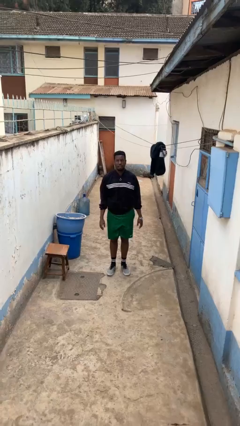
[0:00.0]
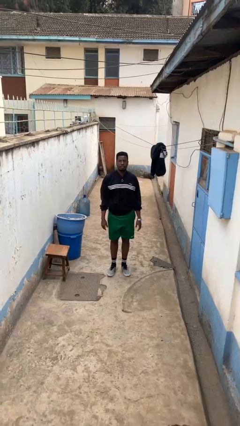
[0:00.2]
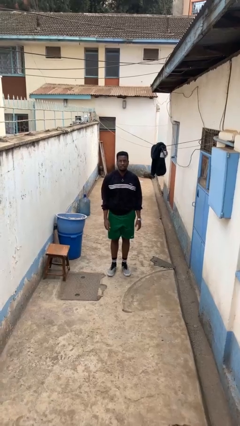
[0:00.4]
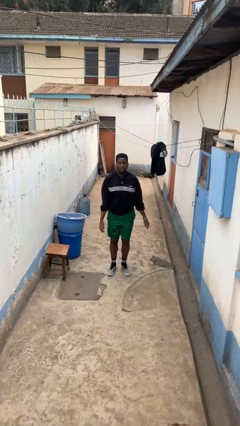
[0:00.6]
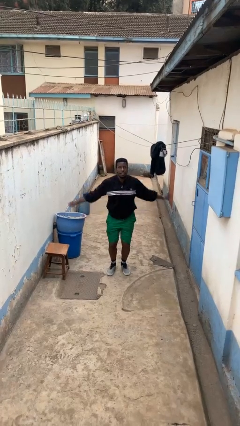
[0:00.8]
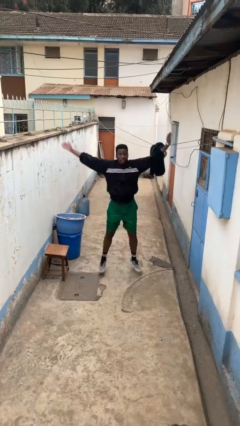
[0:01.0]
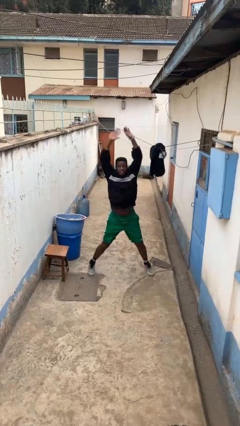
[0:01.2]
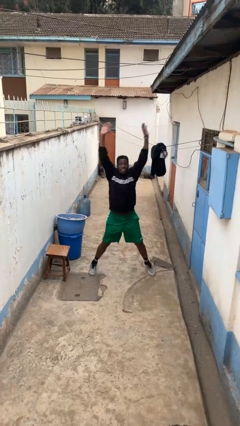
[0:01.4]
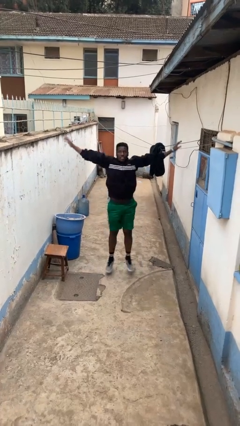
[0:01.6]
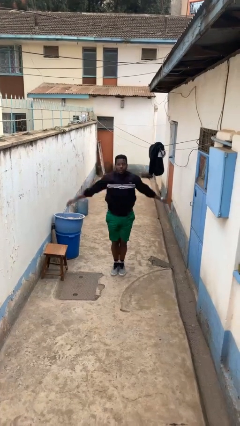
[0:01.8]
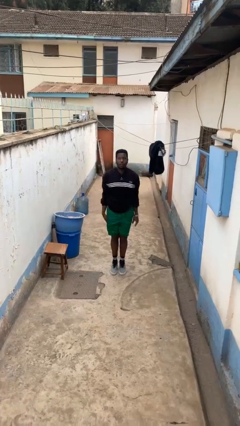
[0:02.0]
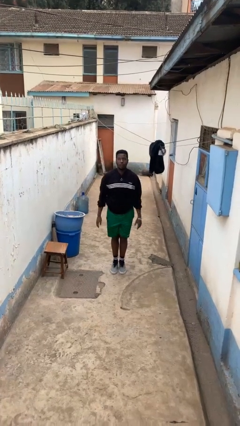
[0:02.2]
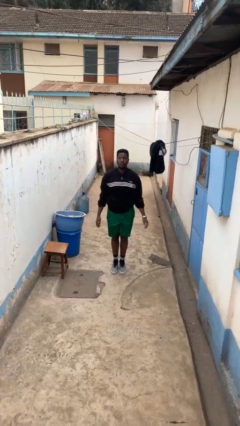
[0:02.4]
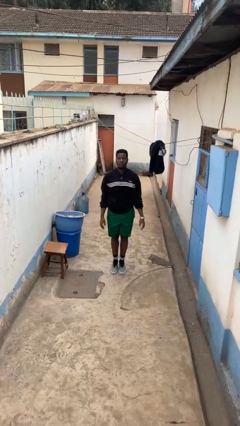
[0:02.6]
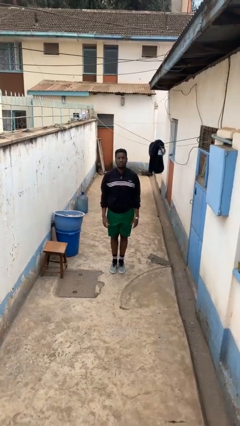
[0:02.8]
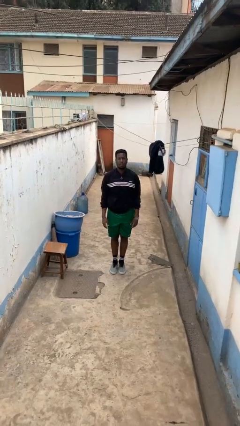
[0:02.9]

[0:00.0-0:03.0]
person exercises with jumping jacks

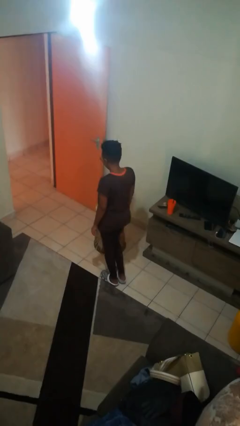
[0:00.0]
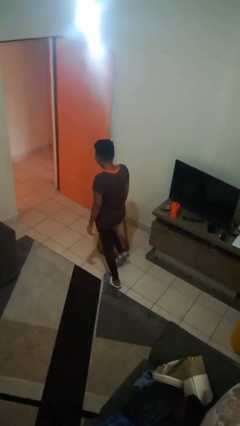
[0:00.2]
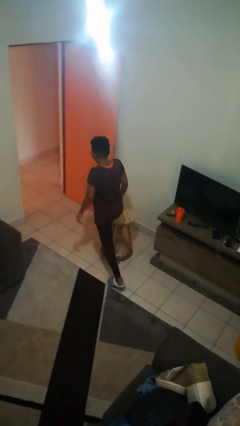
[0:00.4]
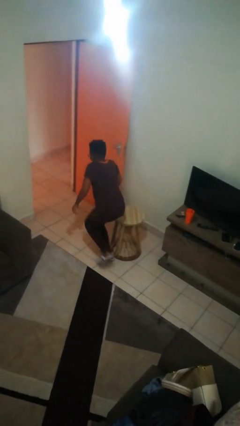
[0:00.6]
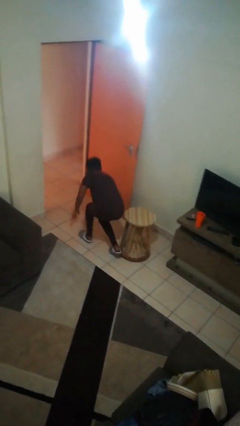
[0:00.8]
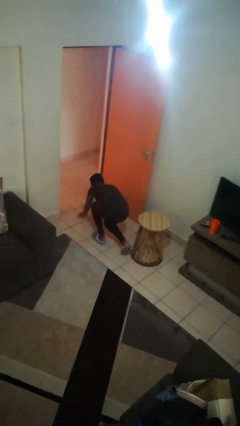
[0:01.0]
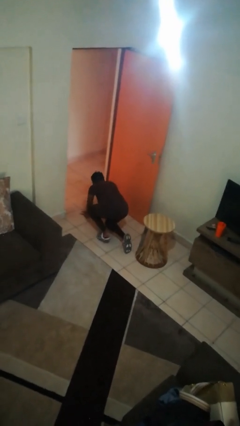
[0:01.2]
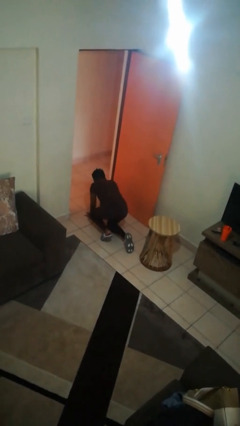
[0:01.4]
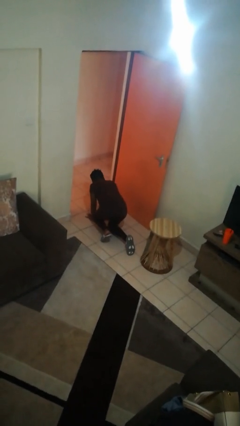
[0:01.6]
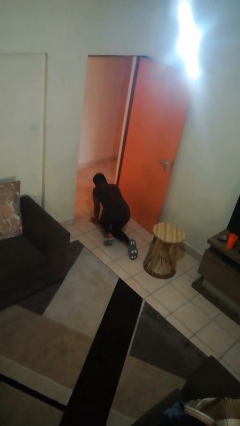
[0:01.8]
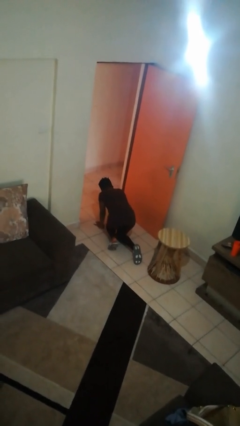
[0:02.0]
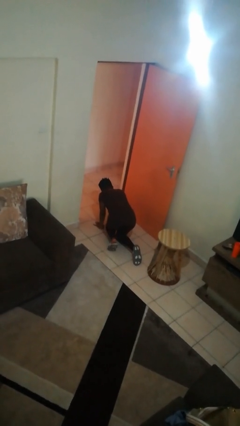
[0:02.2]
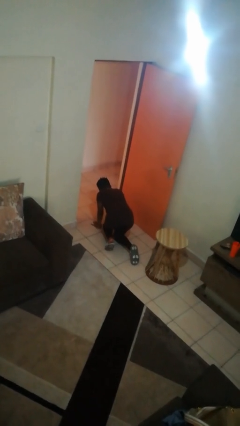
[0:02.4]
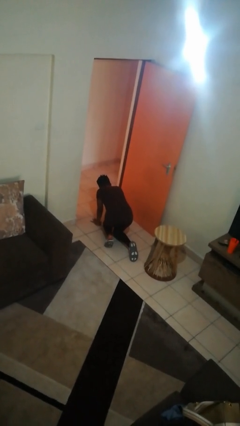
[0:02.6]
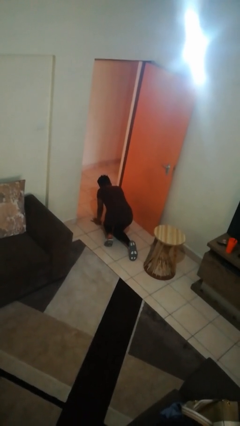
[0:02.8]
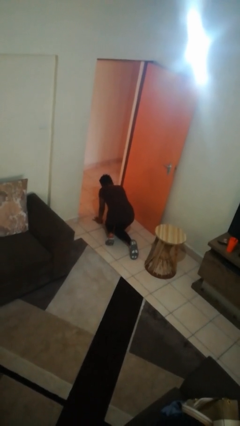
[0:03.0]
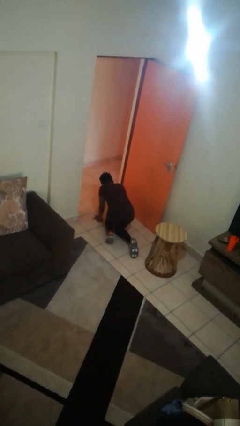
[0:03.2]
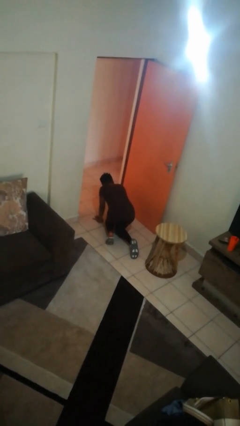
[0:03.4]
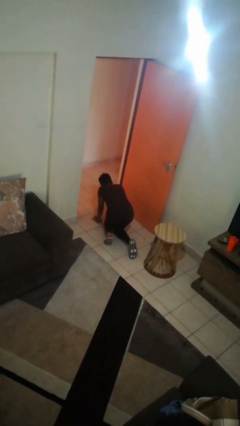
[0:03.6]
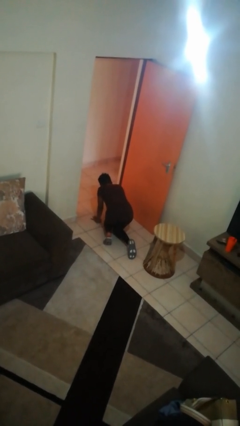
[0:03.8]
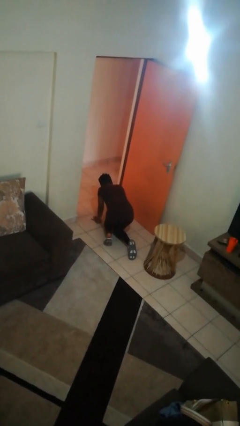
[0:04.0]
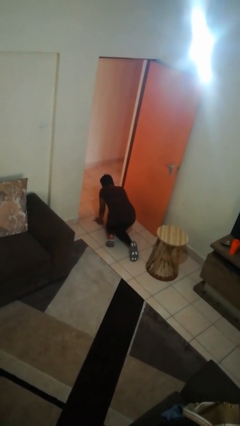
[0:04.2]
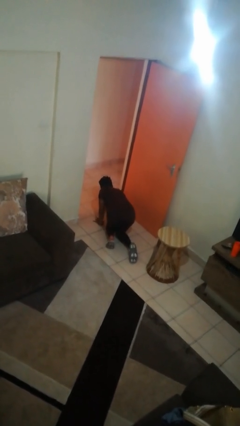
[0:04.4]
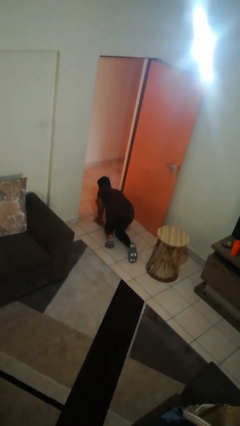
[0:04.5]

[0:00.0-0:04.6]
person trips on object on floor

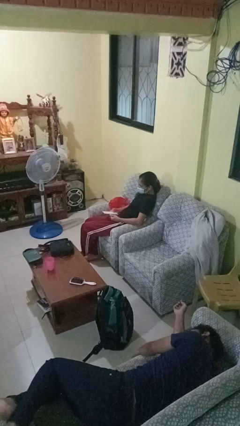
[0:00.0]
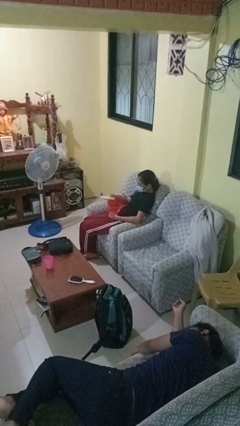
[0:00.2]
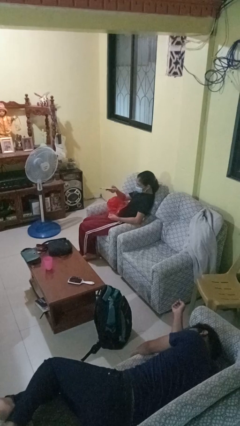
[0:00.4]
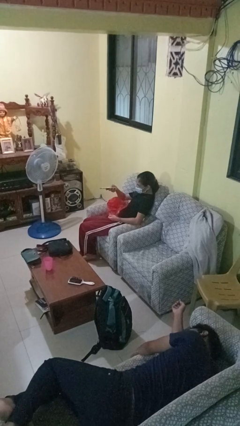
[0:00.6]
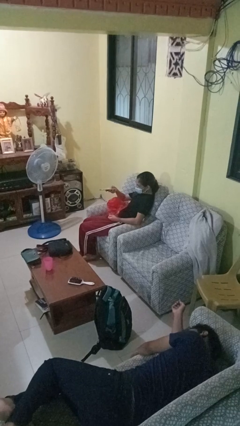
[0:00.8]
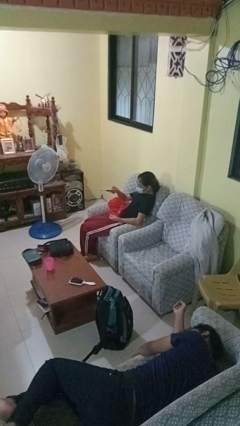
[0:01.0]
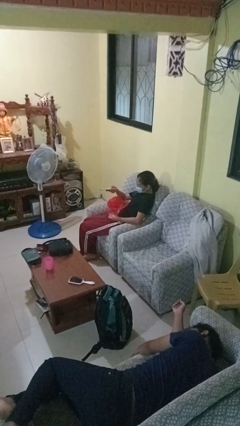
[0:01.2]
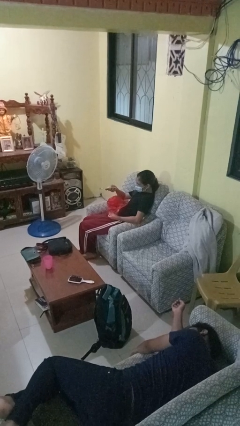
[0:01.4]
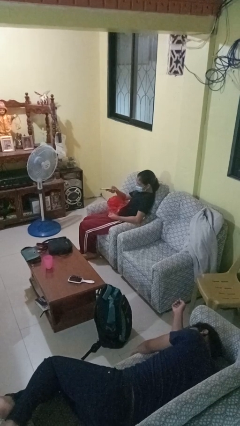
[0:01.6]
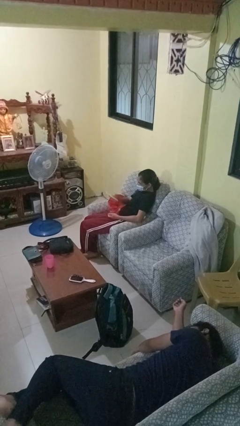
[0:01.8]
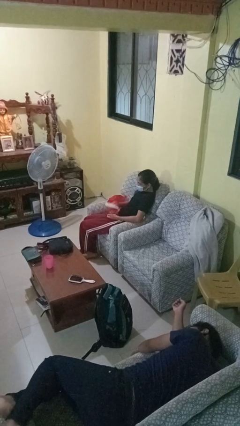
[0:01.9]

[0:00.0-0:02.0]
person uses television remote

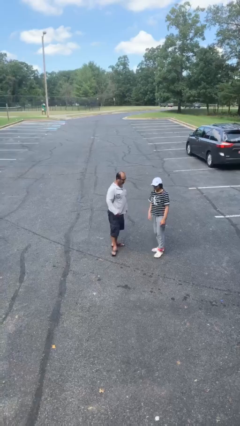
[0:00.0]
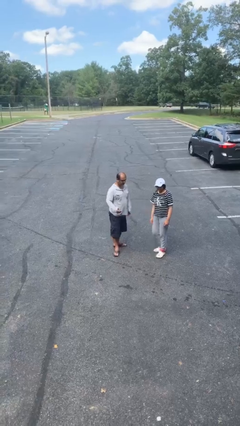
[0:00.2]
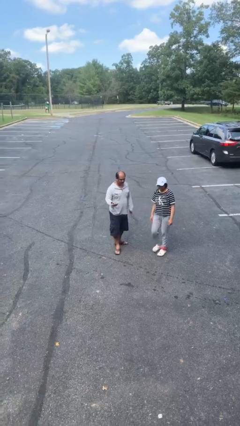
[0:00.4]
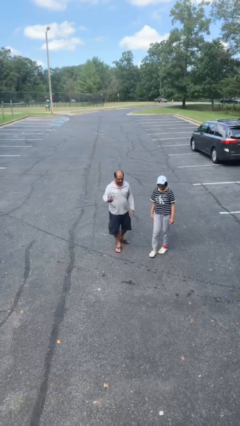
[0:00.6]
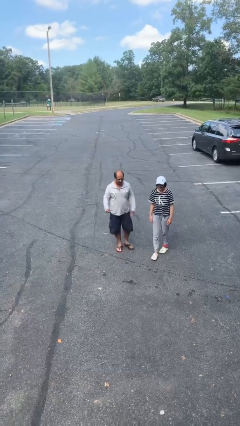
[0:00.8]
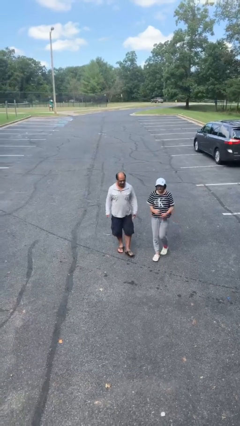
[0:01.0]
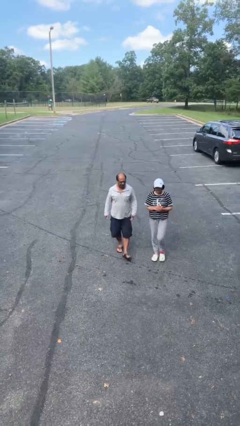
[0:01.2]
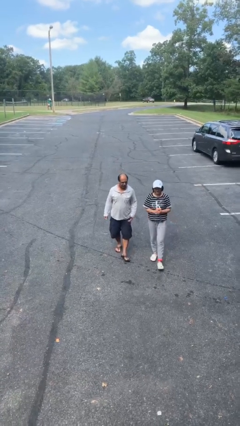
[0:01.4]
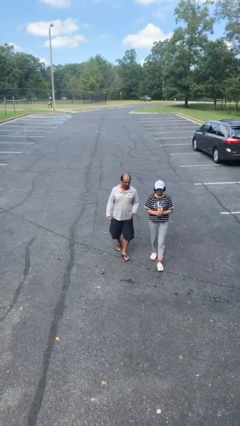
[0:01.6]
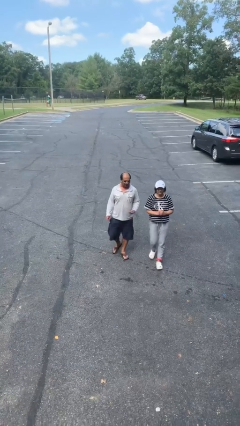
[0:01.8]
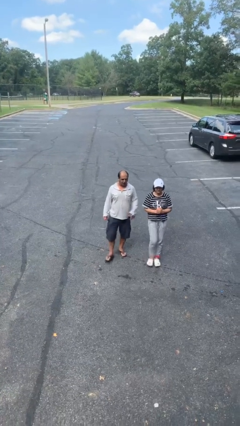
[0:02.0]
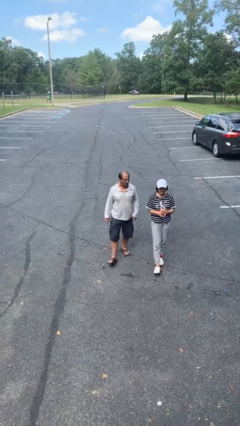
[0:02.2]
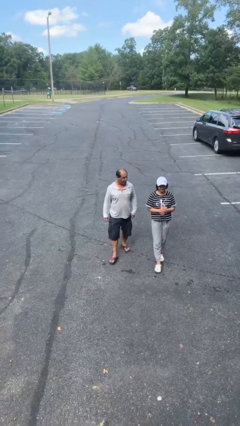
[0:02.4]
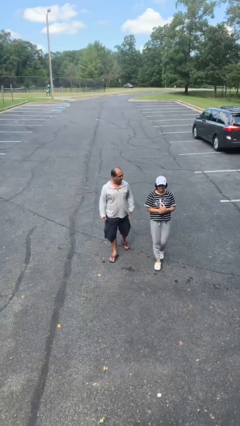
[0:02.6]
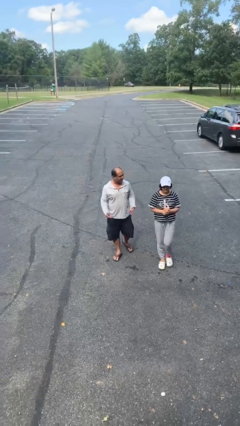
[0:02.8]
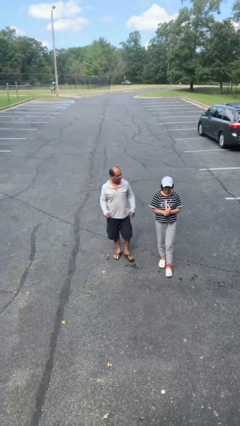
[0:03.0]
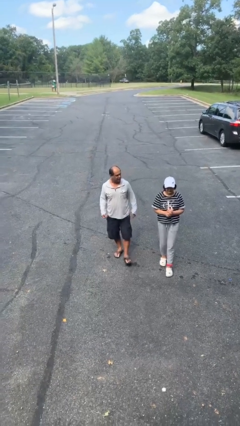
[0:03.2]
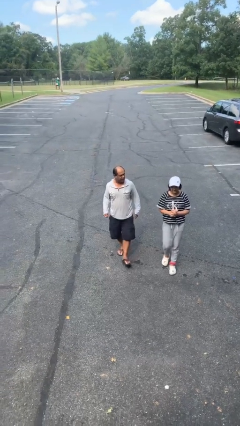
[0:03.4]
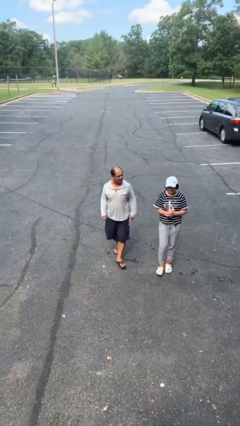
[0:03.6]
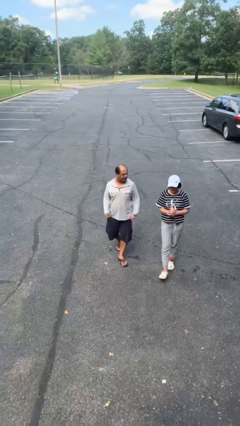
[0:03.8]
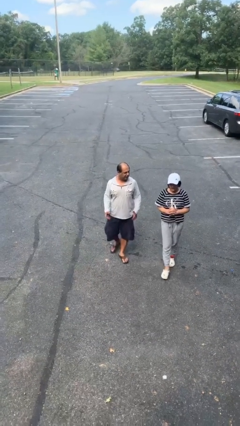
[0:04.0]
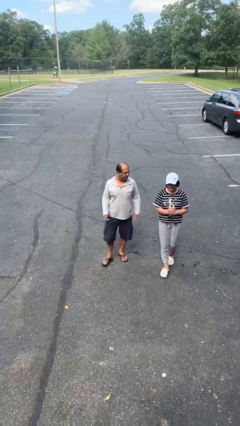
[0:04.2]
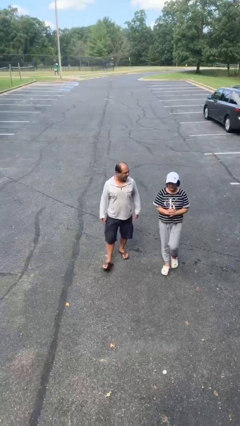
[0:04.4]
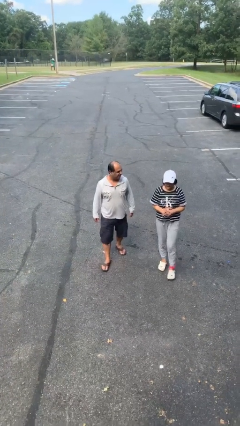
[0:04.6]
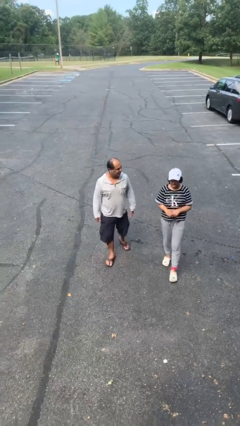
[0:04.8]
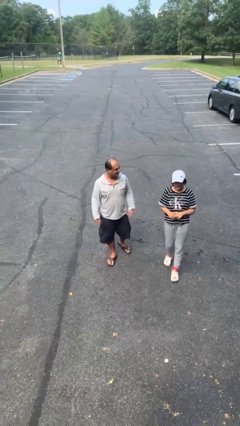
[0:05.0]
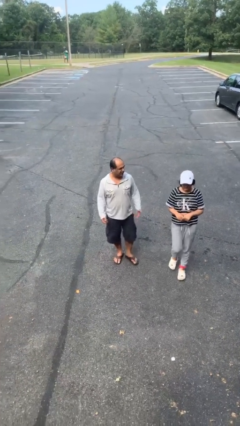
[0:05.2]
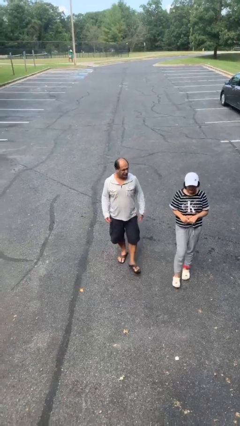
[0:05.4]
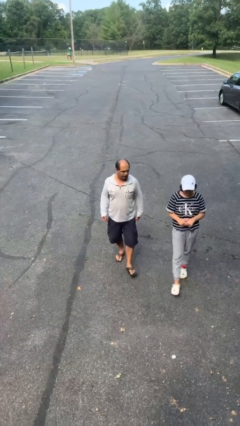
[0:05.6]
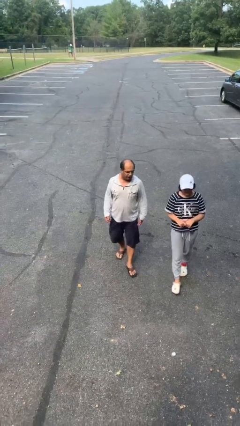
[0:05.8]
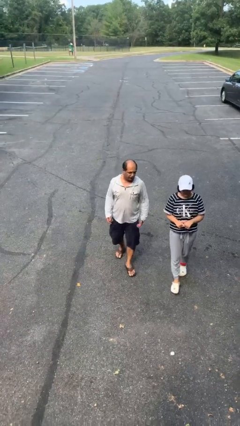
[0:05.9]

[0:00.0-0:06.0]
person talks to person

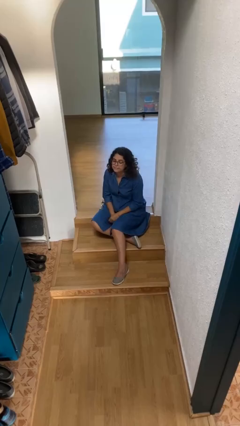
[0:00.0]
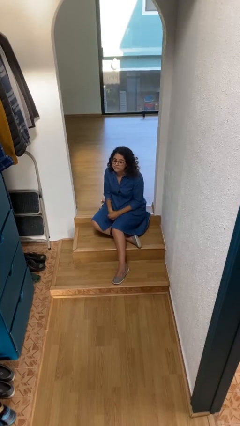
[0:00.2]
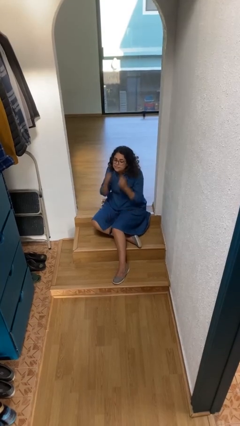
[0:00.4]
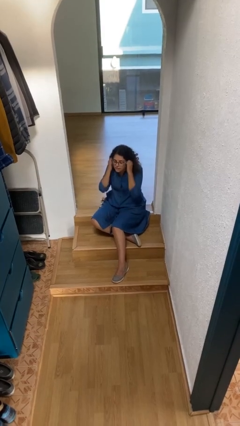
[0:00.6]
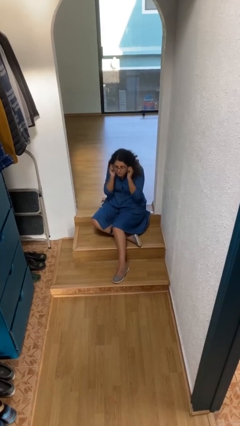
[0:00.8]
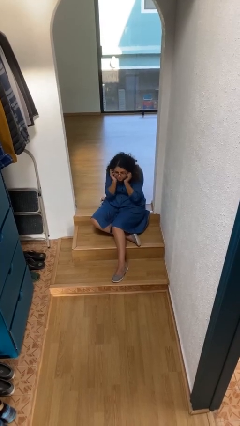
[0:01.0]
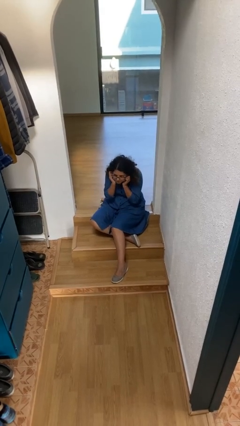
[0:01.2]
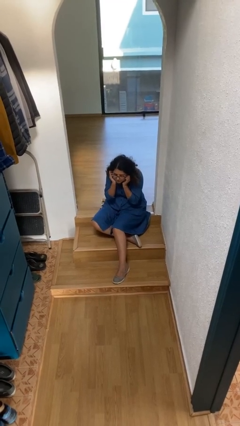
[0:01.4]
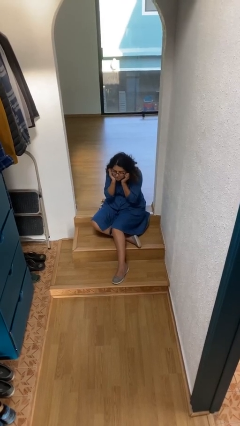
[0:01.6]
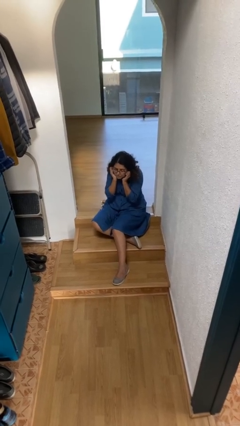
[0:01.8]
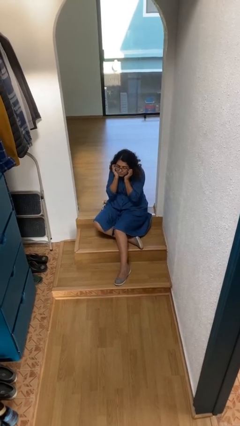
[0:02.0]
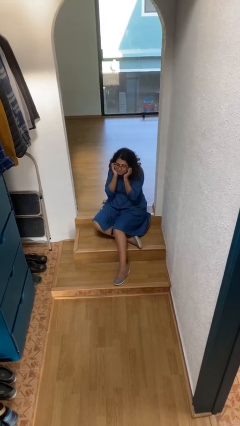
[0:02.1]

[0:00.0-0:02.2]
person puts fingers in ear
